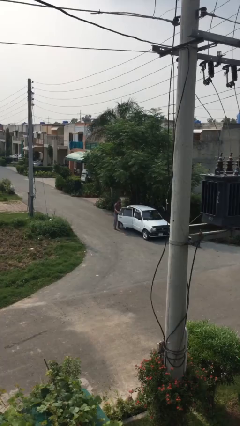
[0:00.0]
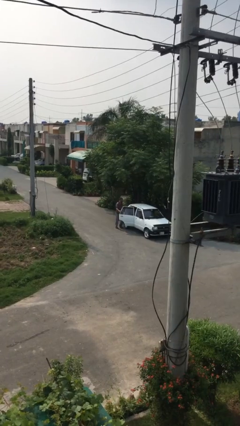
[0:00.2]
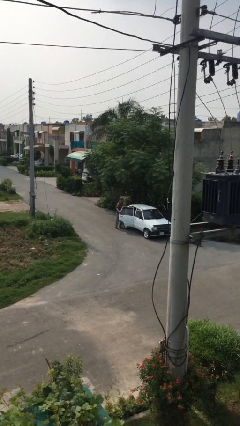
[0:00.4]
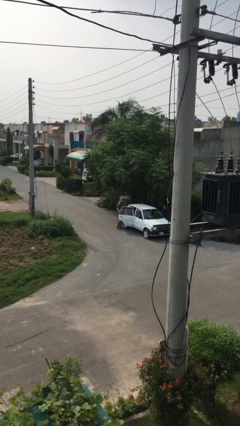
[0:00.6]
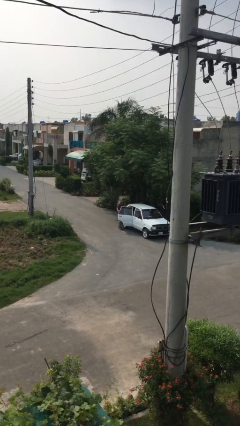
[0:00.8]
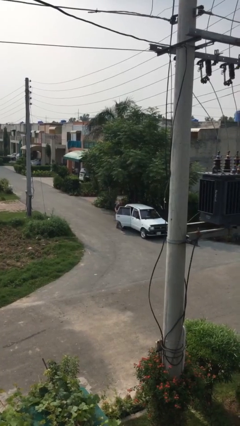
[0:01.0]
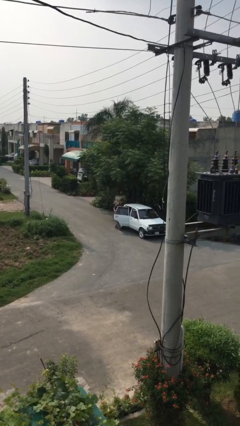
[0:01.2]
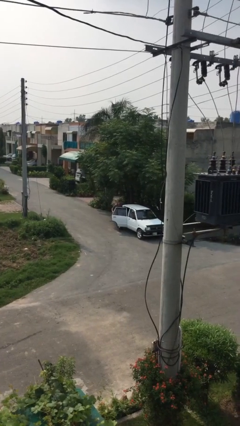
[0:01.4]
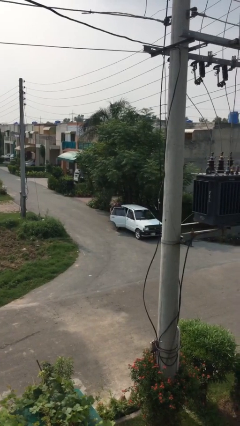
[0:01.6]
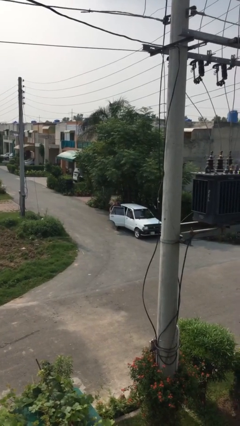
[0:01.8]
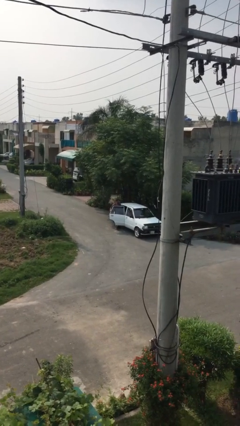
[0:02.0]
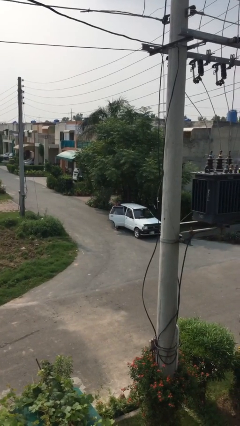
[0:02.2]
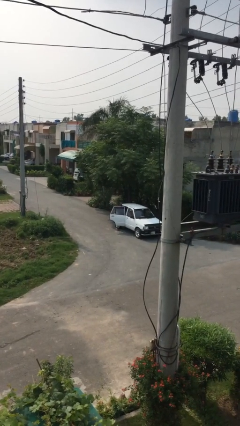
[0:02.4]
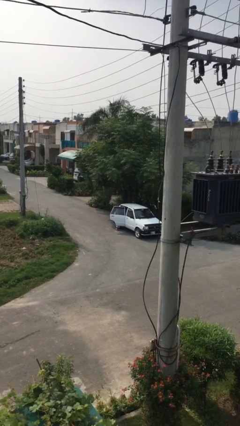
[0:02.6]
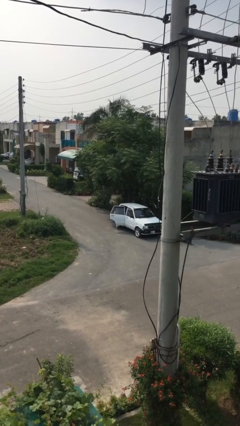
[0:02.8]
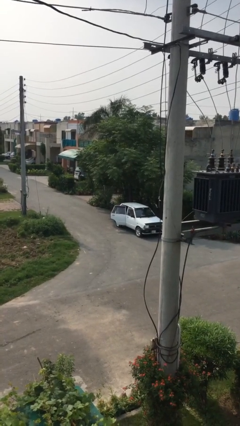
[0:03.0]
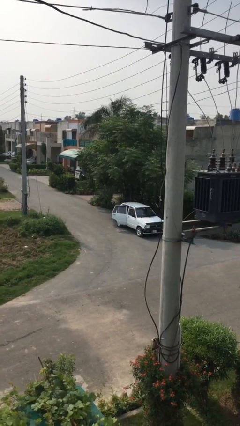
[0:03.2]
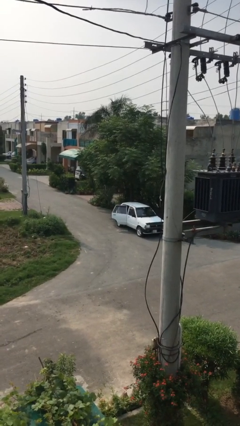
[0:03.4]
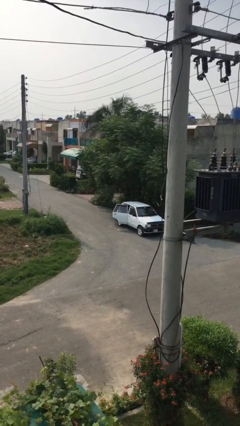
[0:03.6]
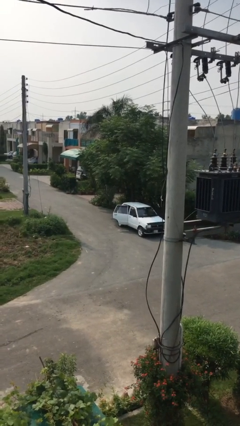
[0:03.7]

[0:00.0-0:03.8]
person enters car

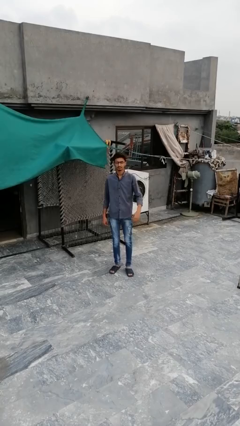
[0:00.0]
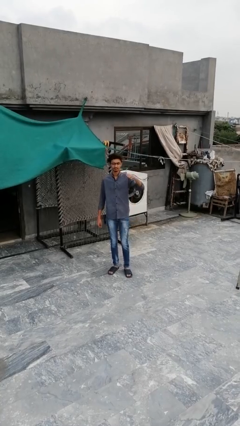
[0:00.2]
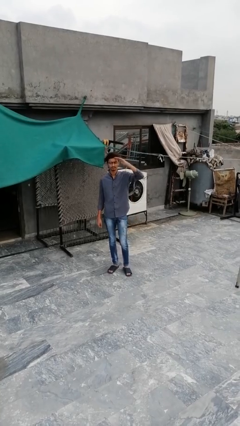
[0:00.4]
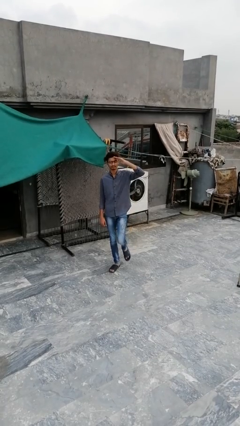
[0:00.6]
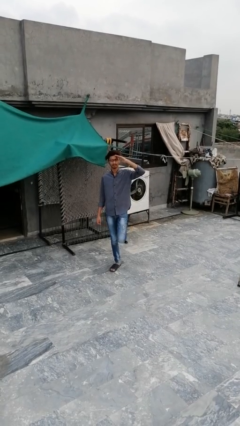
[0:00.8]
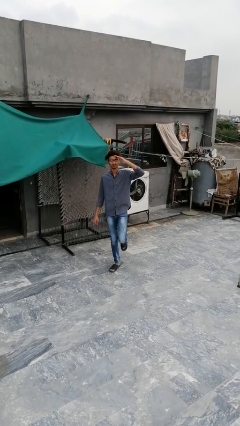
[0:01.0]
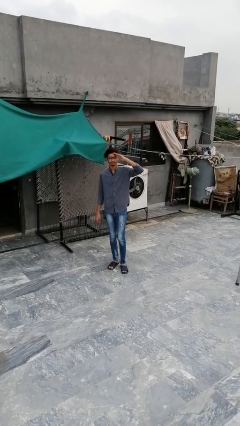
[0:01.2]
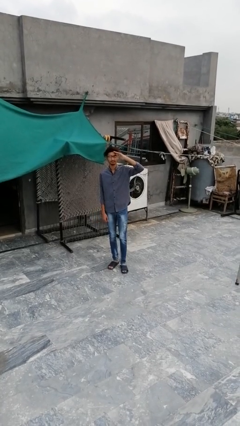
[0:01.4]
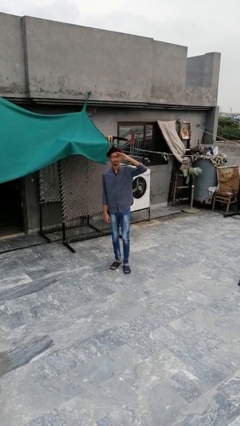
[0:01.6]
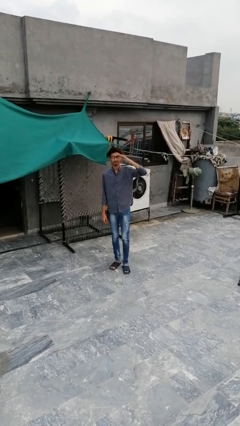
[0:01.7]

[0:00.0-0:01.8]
person salutes

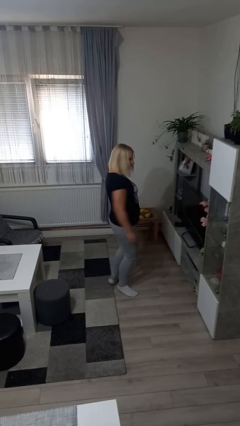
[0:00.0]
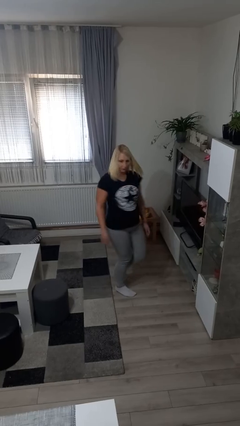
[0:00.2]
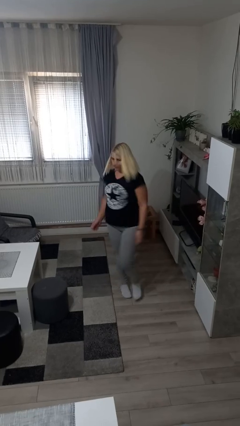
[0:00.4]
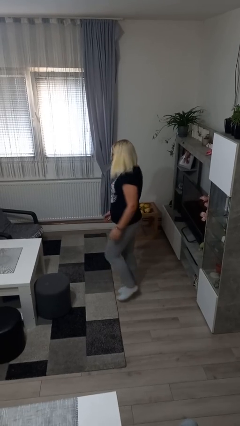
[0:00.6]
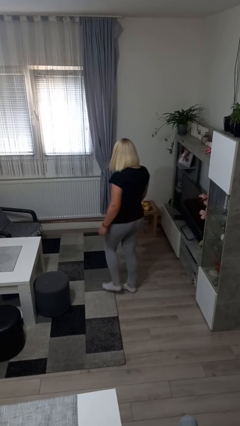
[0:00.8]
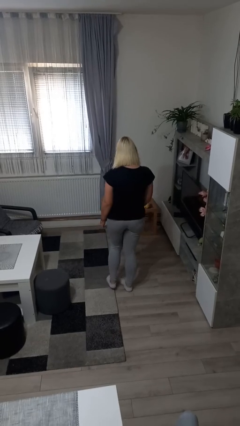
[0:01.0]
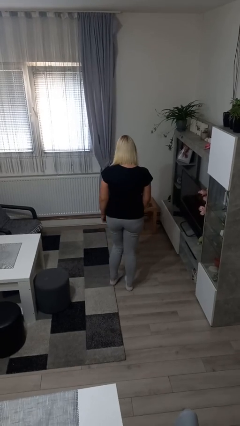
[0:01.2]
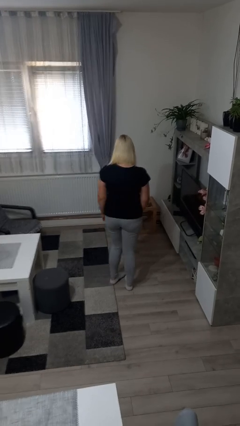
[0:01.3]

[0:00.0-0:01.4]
person twirls

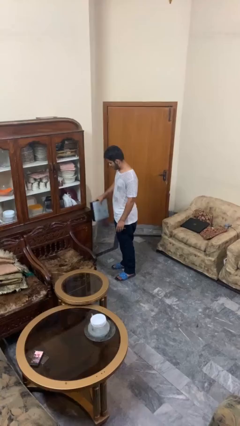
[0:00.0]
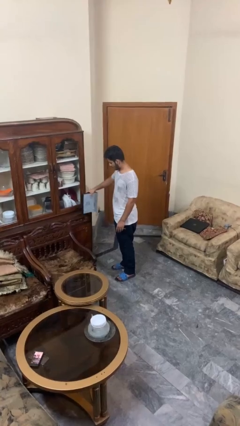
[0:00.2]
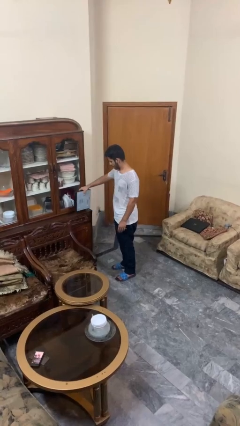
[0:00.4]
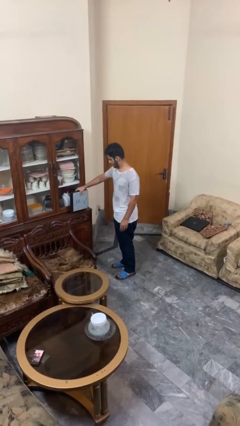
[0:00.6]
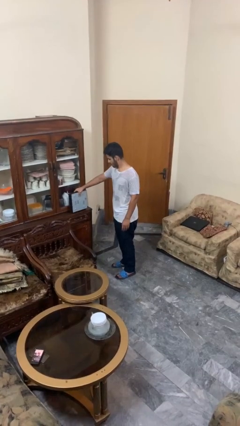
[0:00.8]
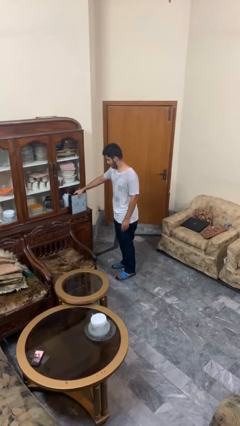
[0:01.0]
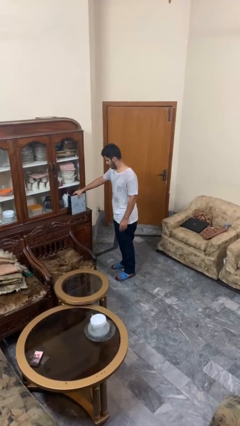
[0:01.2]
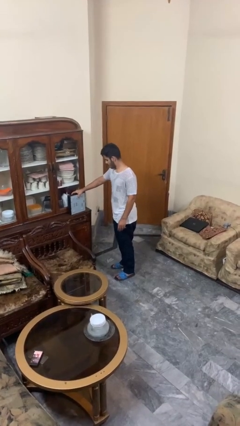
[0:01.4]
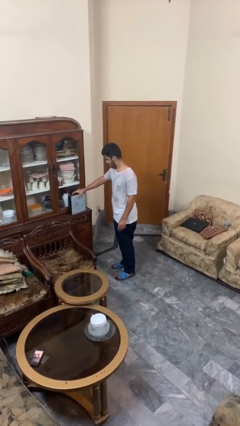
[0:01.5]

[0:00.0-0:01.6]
person puts down object on countertop

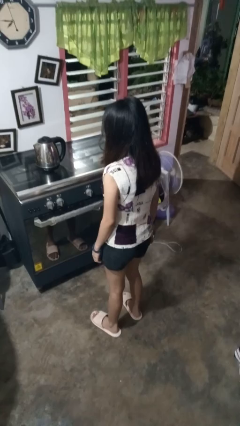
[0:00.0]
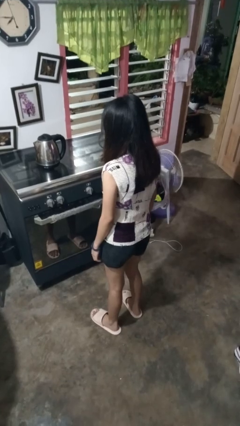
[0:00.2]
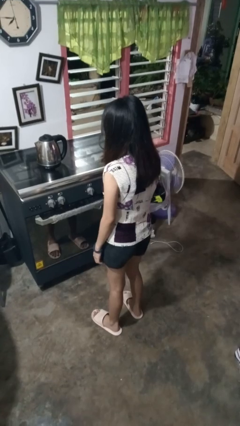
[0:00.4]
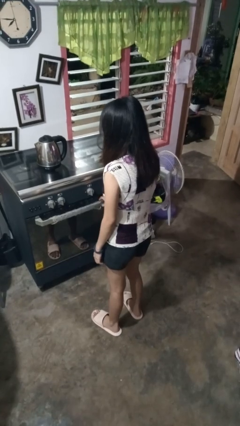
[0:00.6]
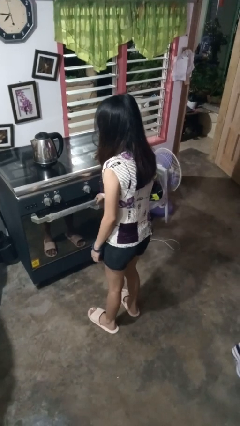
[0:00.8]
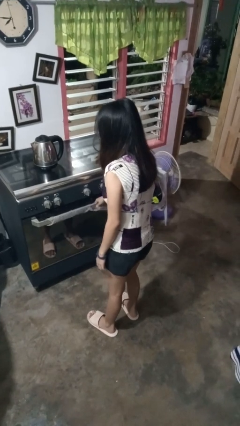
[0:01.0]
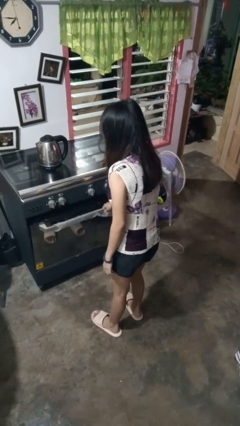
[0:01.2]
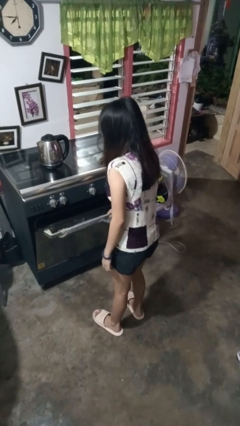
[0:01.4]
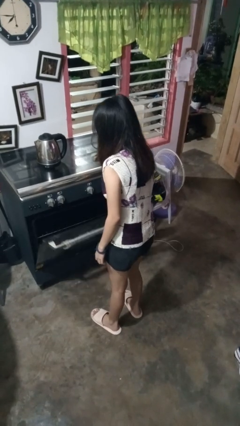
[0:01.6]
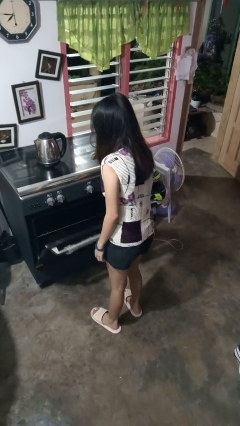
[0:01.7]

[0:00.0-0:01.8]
person opens oven door

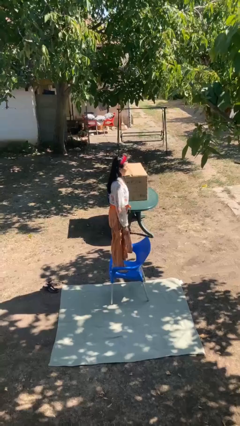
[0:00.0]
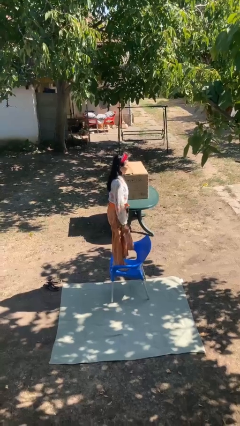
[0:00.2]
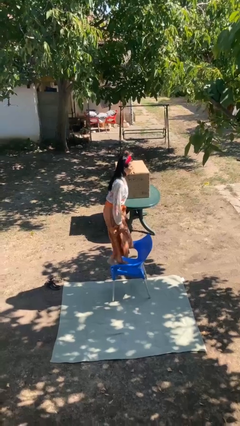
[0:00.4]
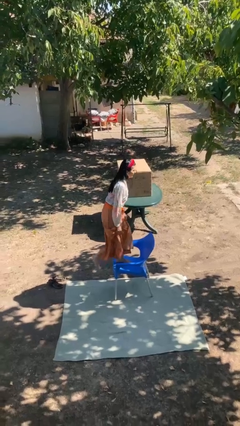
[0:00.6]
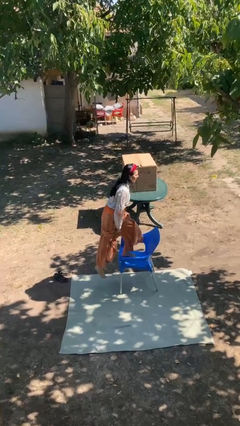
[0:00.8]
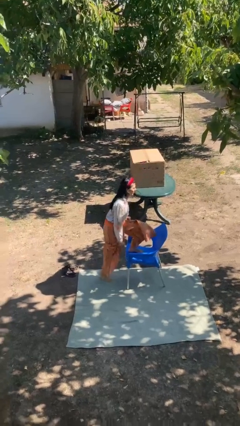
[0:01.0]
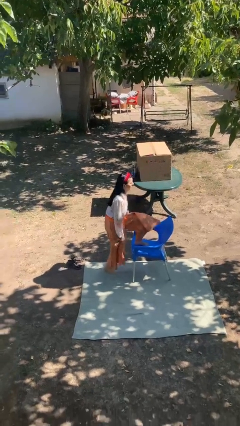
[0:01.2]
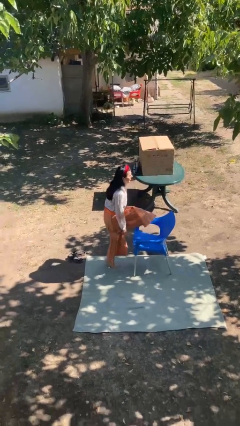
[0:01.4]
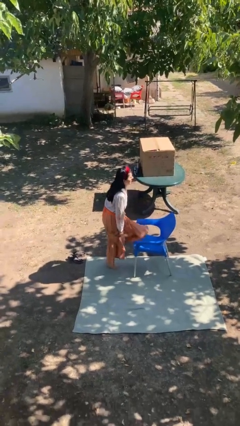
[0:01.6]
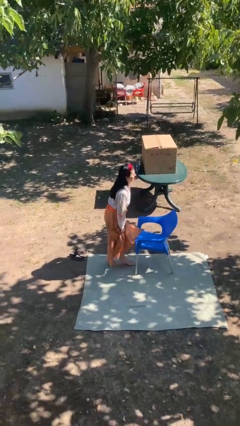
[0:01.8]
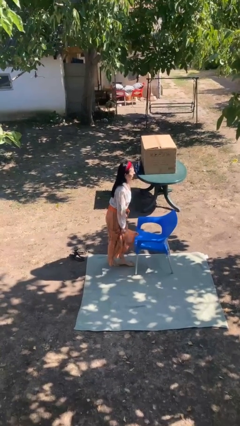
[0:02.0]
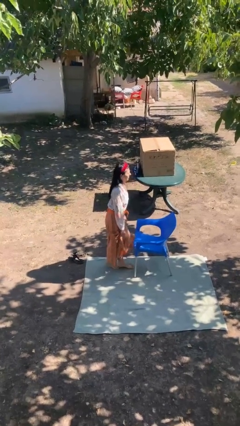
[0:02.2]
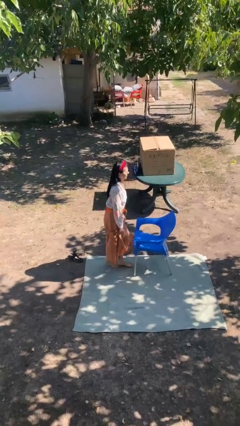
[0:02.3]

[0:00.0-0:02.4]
person climbs off chair

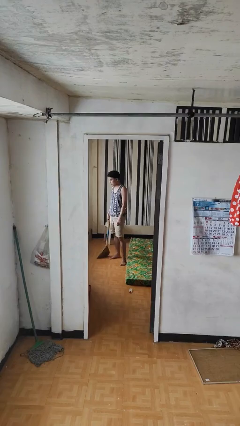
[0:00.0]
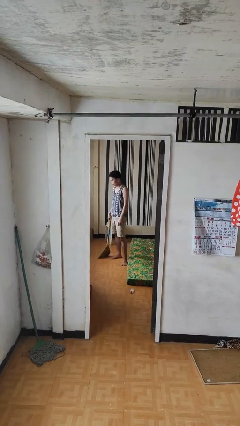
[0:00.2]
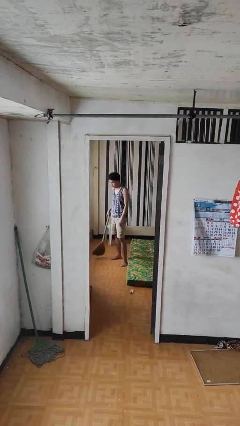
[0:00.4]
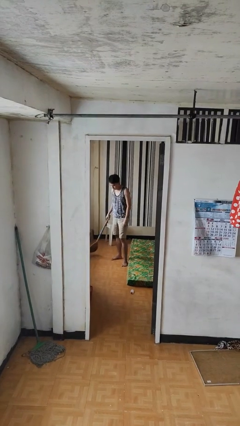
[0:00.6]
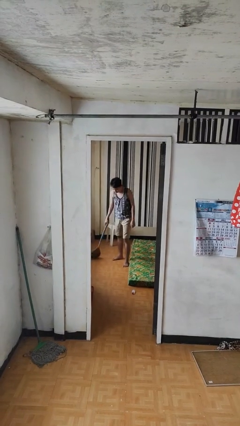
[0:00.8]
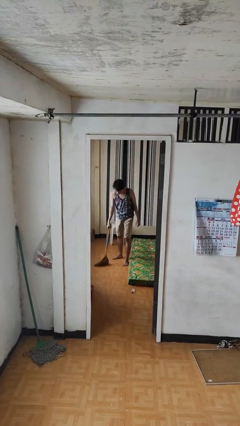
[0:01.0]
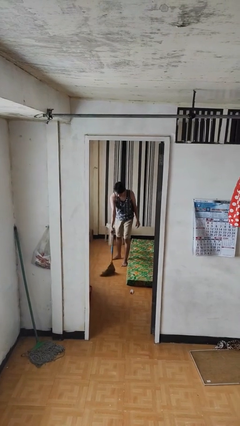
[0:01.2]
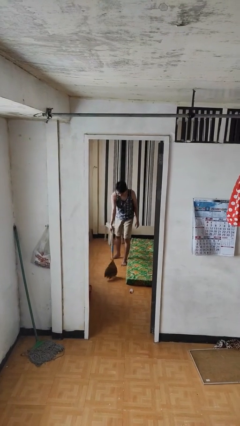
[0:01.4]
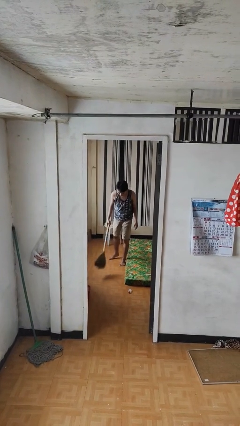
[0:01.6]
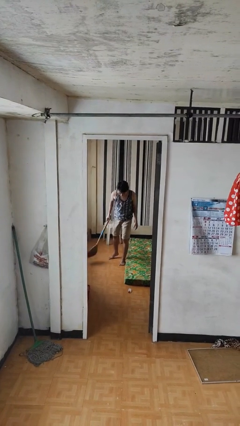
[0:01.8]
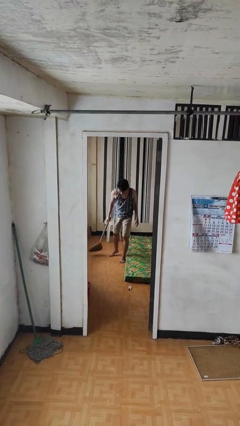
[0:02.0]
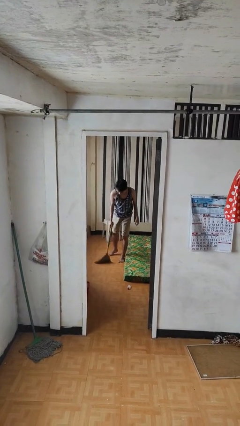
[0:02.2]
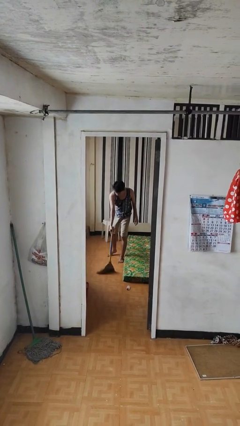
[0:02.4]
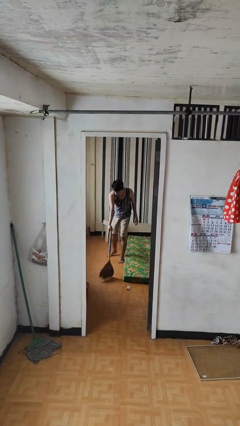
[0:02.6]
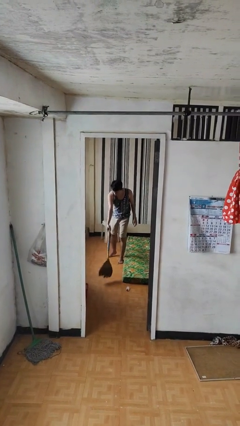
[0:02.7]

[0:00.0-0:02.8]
person sweeps floor

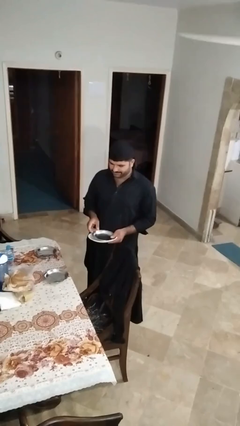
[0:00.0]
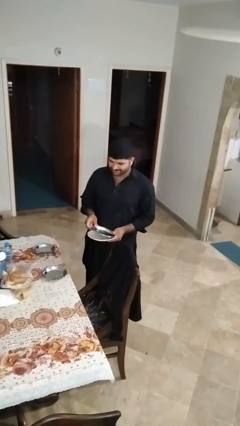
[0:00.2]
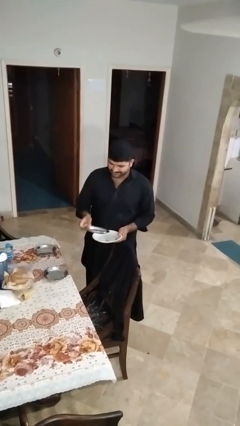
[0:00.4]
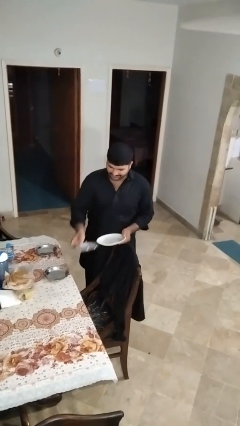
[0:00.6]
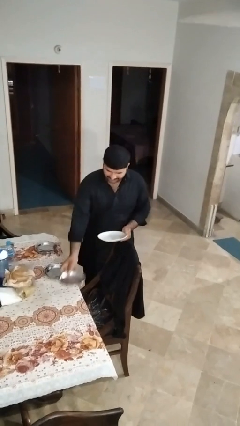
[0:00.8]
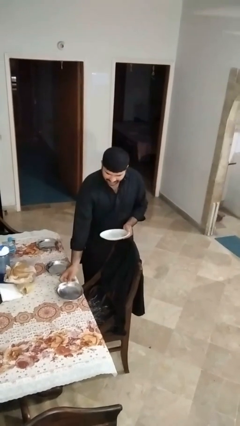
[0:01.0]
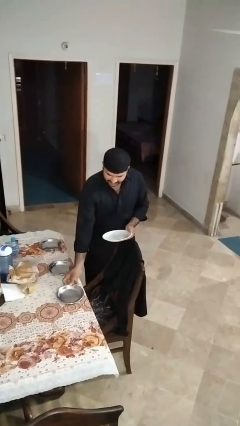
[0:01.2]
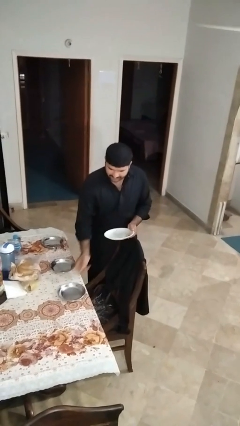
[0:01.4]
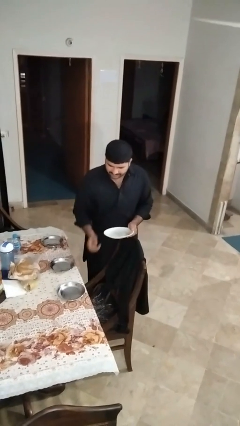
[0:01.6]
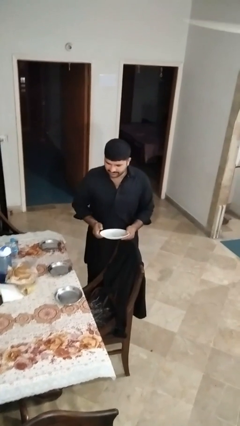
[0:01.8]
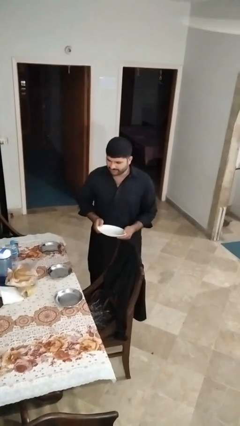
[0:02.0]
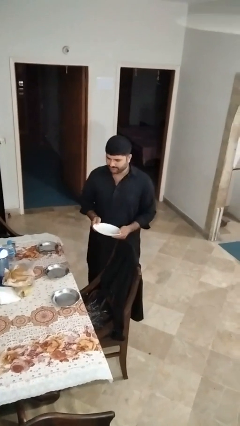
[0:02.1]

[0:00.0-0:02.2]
person sets table
